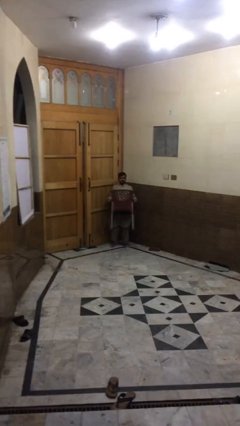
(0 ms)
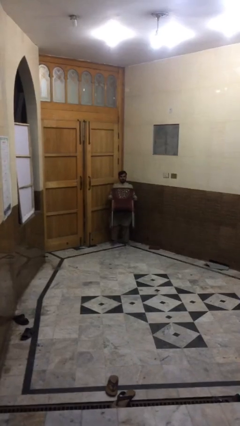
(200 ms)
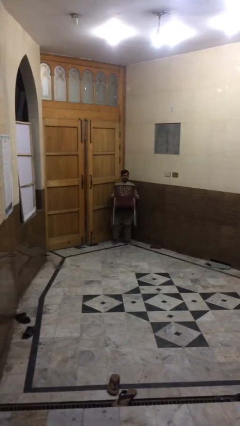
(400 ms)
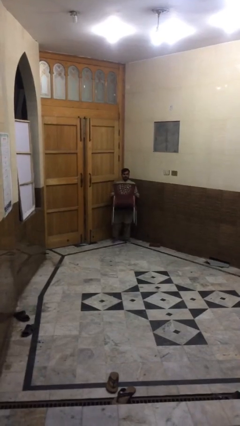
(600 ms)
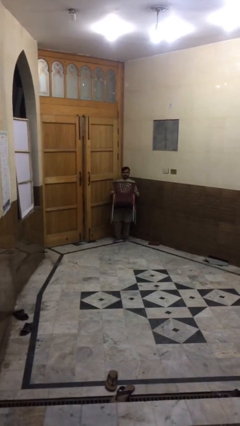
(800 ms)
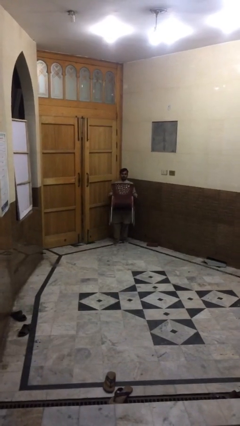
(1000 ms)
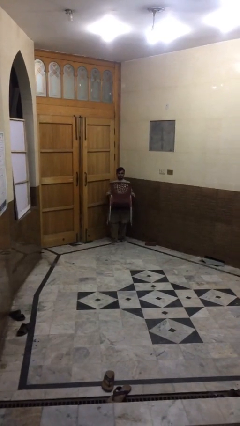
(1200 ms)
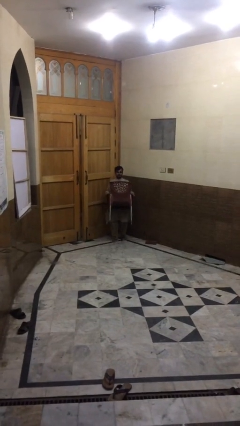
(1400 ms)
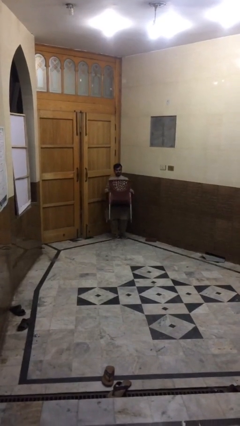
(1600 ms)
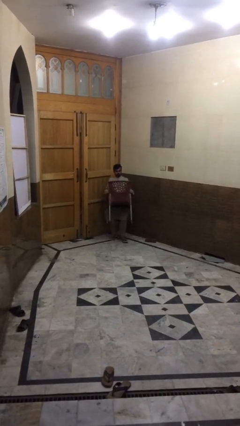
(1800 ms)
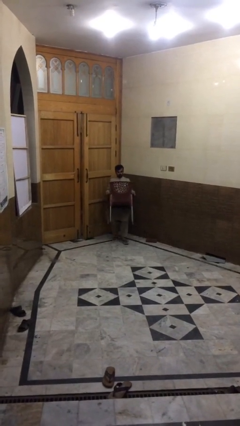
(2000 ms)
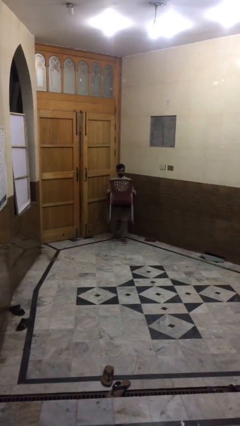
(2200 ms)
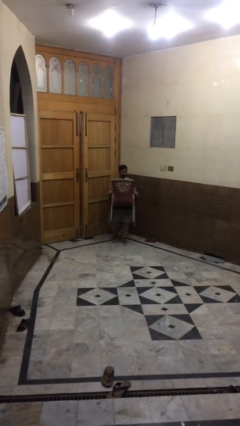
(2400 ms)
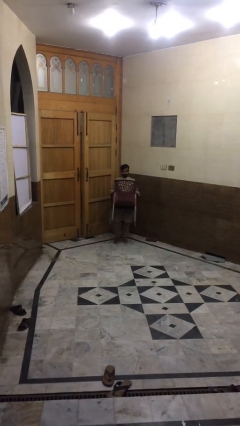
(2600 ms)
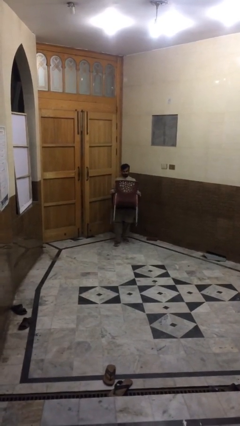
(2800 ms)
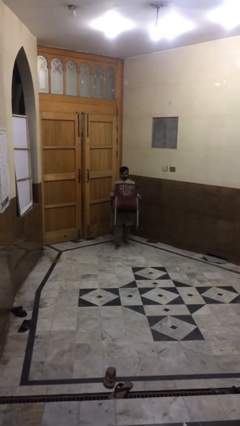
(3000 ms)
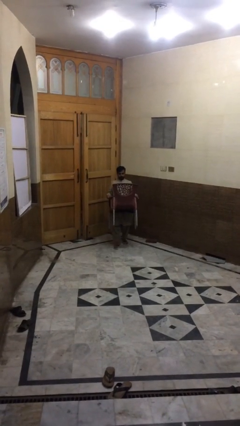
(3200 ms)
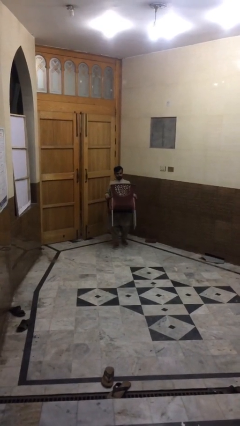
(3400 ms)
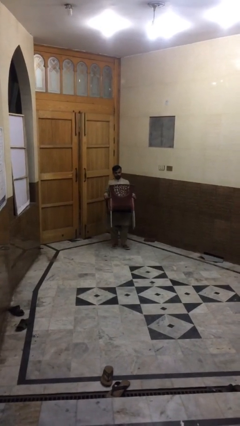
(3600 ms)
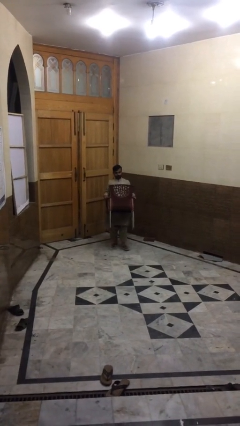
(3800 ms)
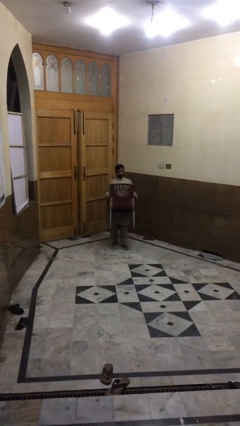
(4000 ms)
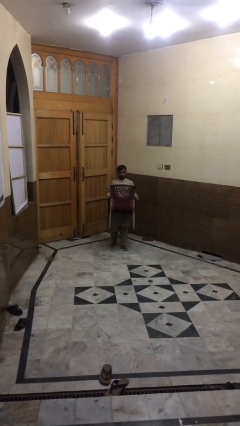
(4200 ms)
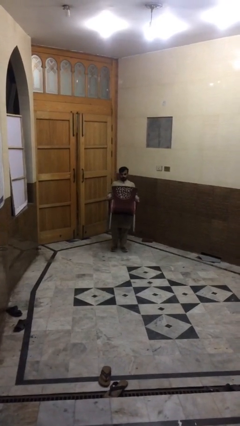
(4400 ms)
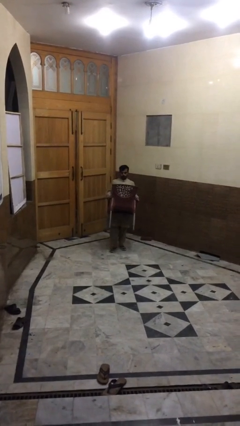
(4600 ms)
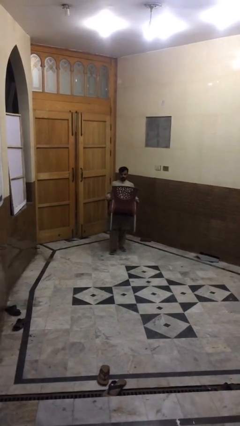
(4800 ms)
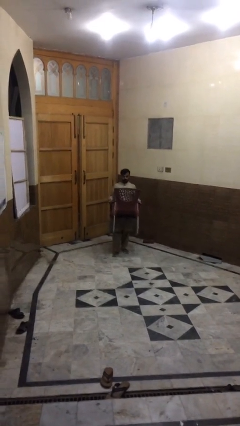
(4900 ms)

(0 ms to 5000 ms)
person carries heavy object

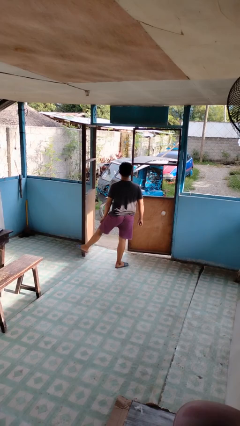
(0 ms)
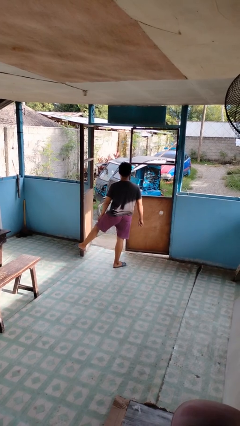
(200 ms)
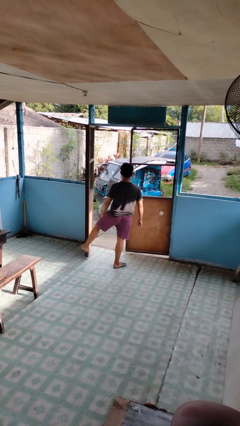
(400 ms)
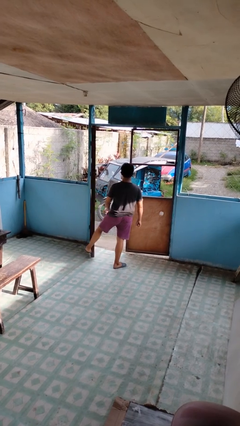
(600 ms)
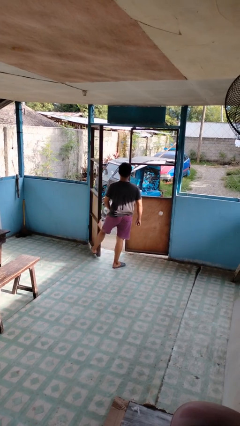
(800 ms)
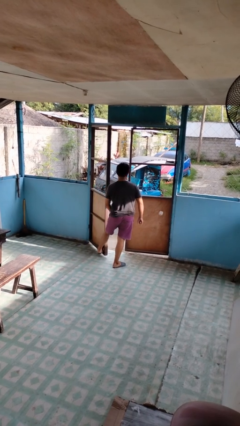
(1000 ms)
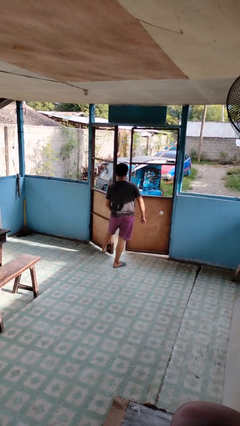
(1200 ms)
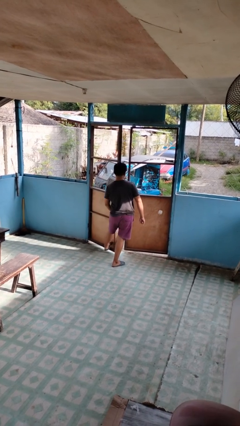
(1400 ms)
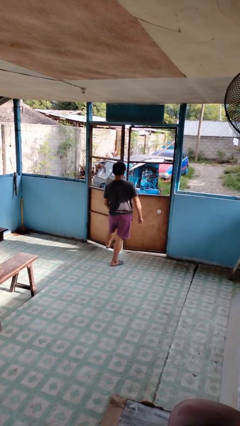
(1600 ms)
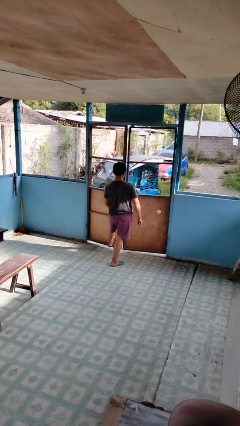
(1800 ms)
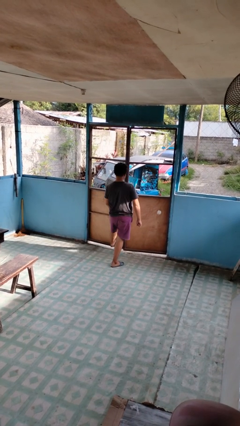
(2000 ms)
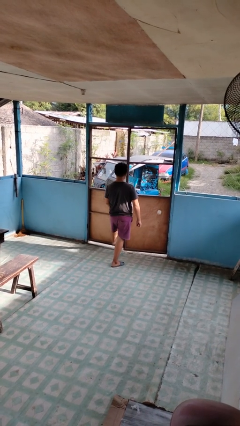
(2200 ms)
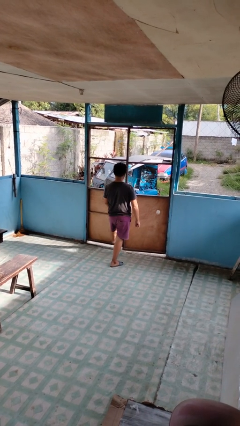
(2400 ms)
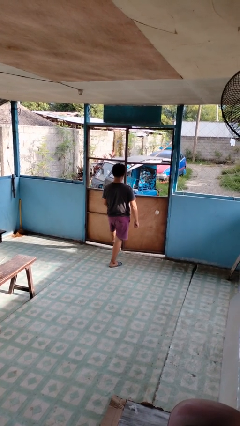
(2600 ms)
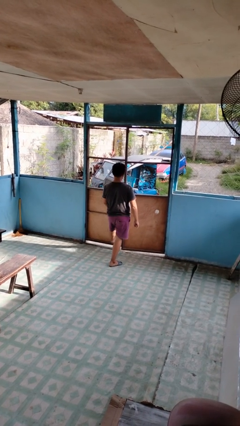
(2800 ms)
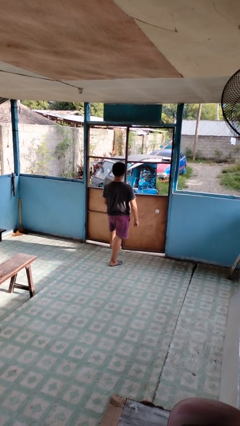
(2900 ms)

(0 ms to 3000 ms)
person closes door with foot

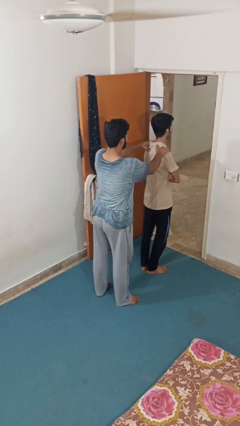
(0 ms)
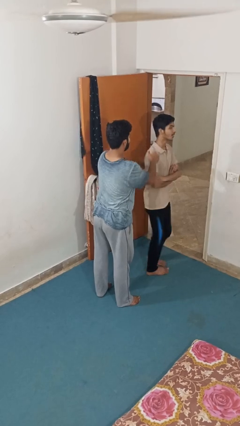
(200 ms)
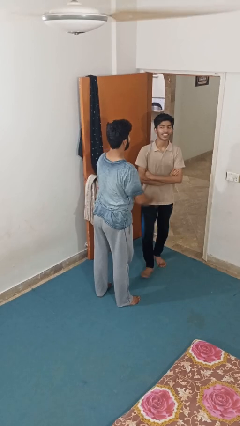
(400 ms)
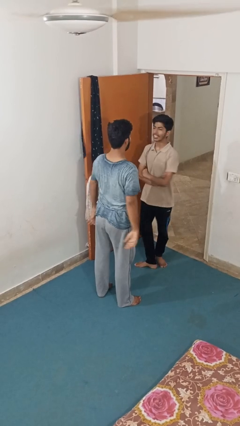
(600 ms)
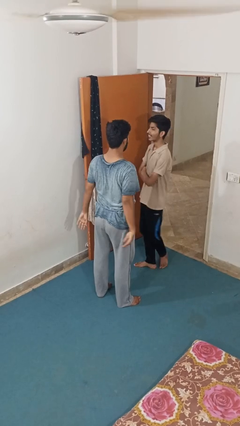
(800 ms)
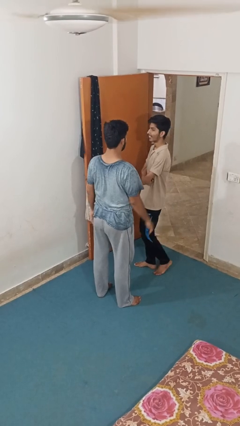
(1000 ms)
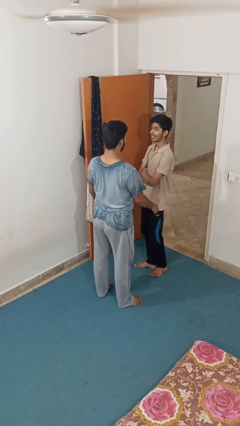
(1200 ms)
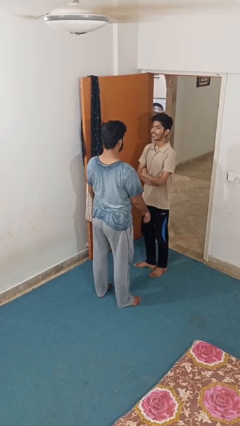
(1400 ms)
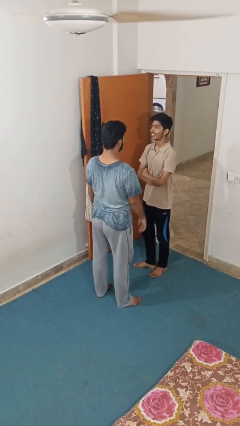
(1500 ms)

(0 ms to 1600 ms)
person spins person around

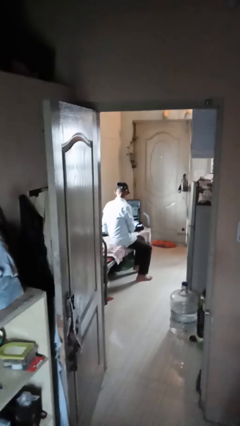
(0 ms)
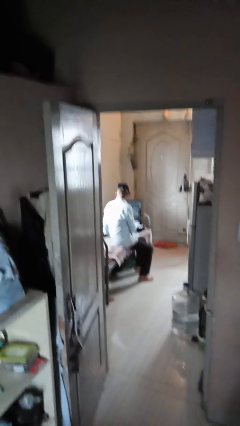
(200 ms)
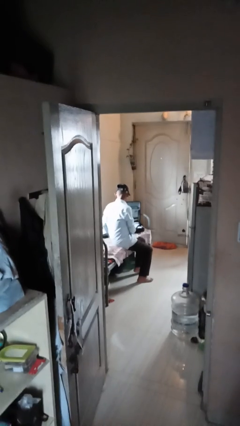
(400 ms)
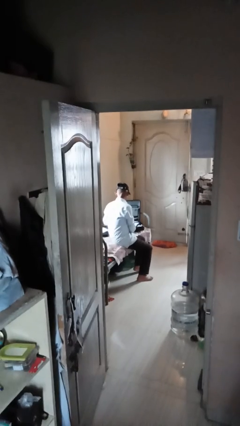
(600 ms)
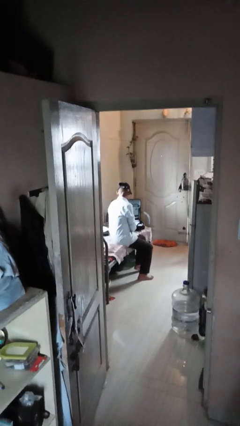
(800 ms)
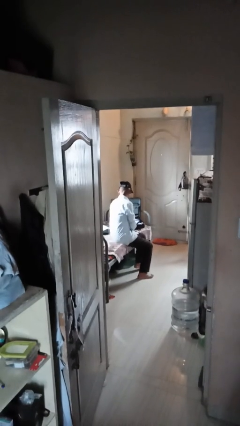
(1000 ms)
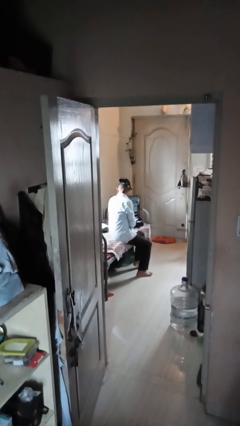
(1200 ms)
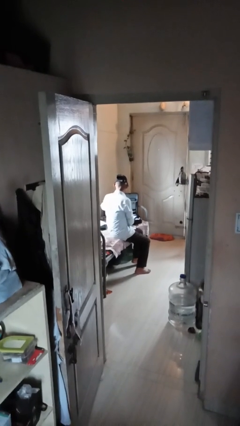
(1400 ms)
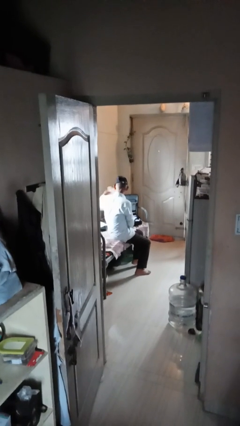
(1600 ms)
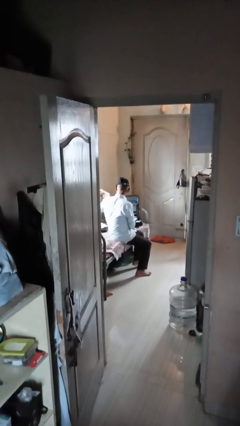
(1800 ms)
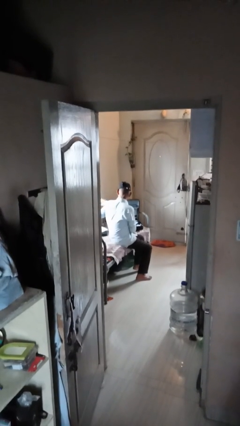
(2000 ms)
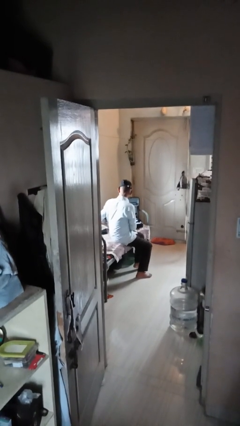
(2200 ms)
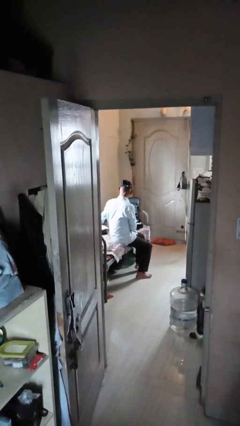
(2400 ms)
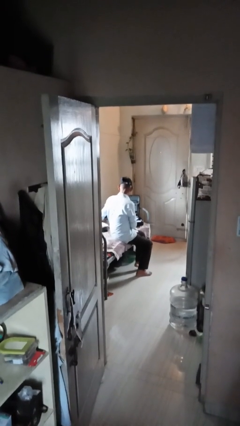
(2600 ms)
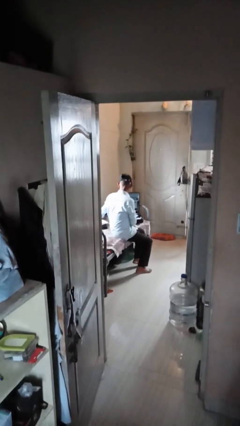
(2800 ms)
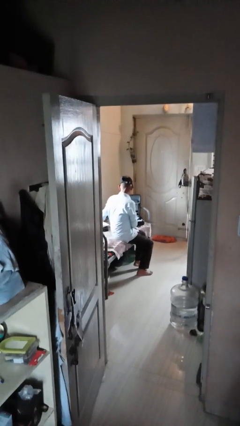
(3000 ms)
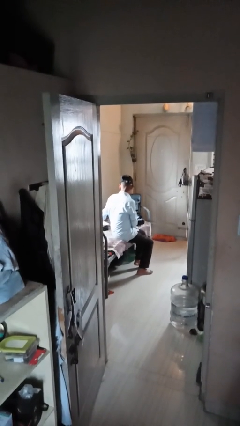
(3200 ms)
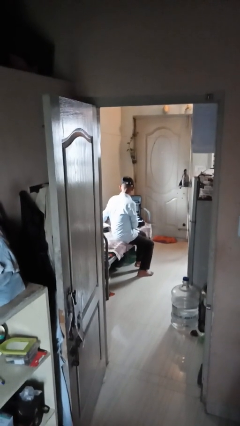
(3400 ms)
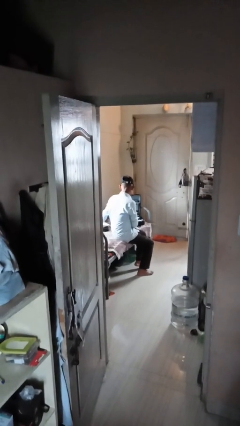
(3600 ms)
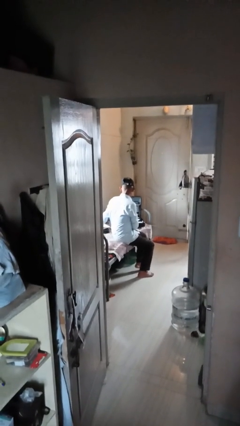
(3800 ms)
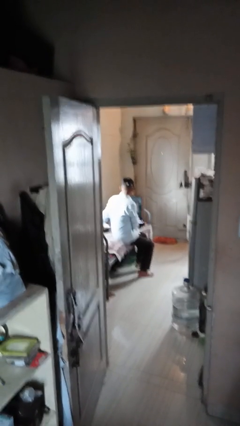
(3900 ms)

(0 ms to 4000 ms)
person unloads clothes from suitcase

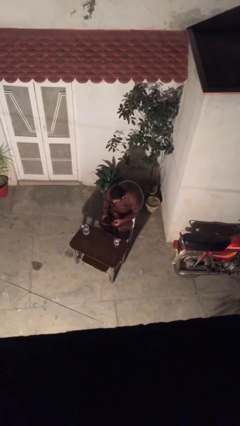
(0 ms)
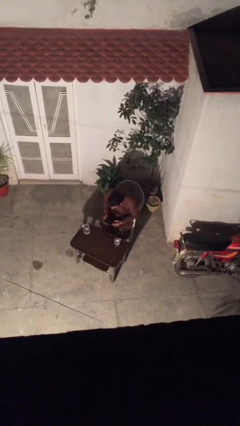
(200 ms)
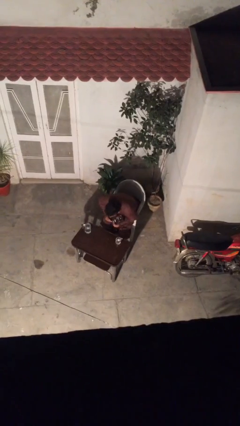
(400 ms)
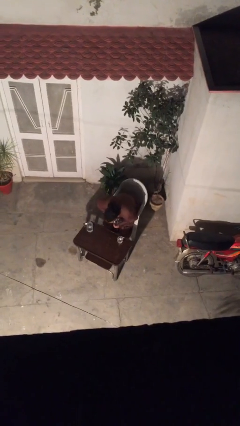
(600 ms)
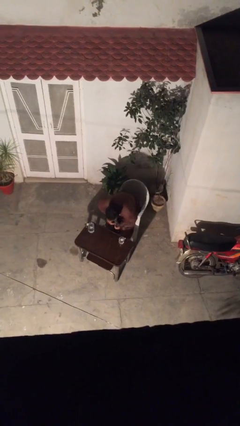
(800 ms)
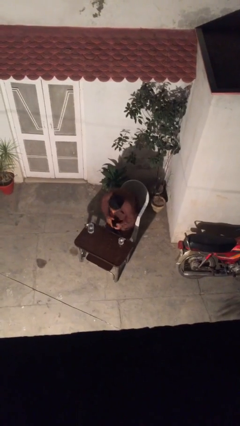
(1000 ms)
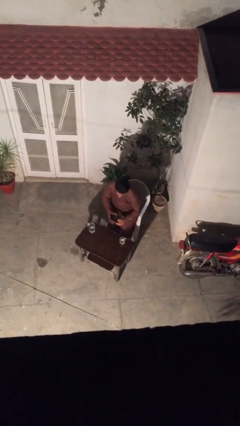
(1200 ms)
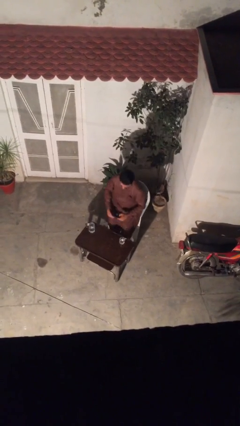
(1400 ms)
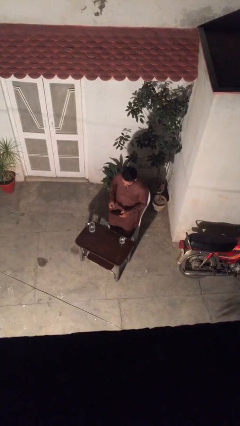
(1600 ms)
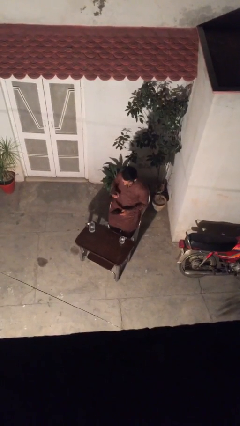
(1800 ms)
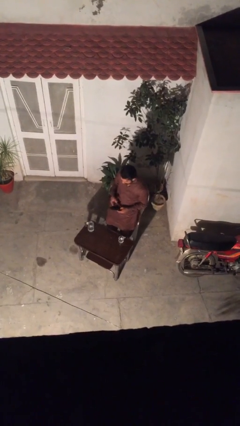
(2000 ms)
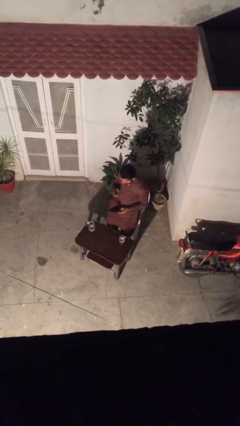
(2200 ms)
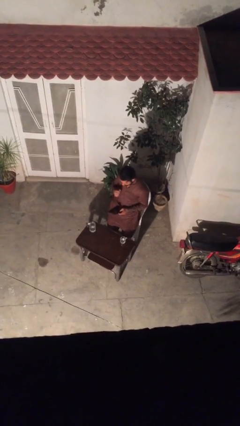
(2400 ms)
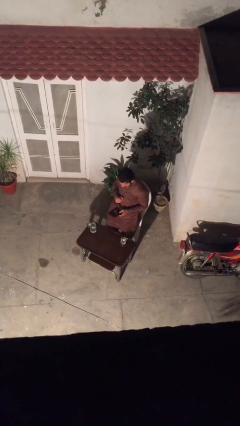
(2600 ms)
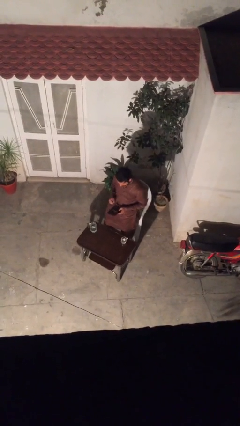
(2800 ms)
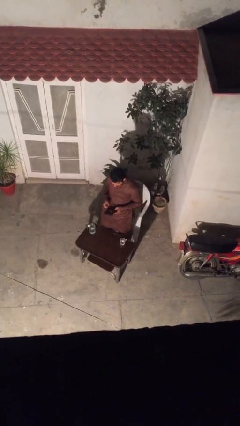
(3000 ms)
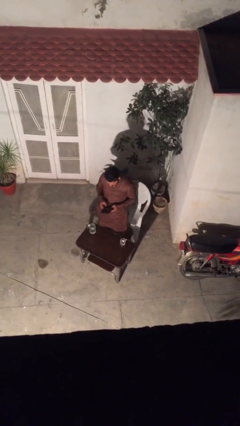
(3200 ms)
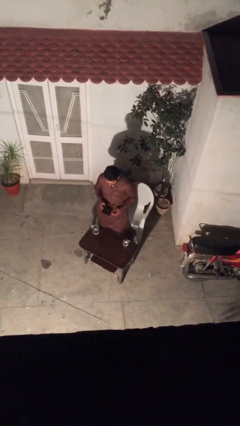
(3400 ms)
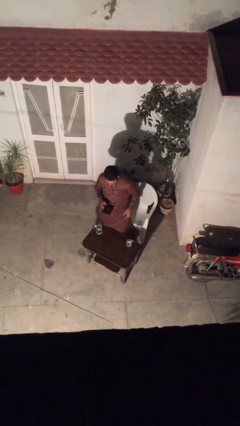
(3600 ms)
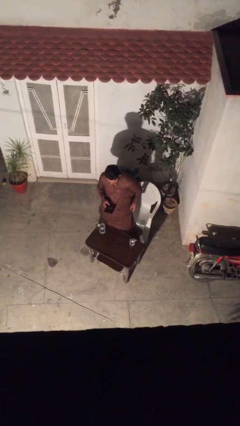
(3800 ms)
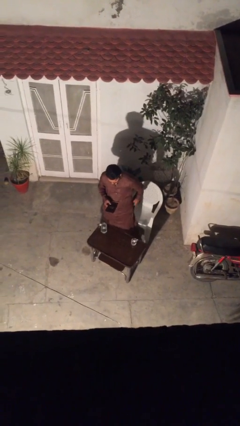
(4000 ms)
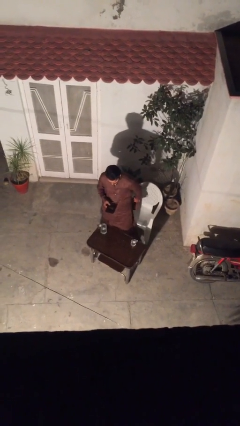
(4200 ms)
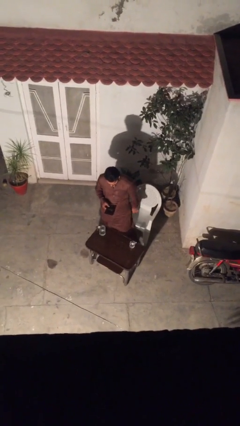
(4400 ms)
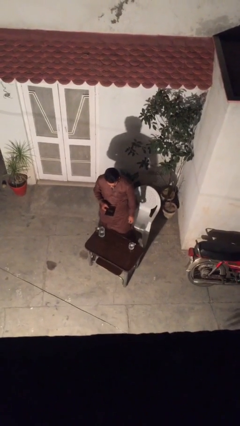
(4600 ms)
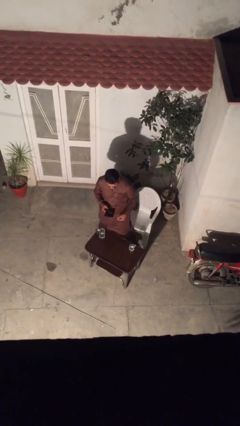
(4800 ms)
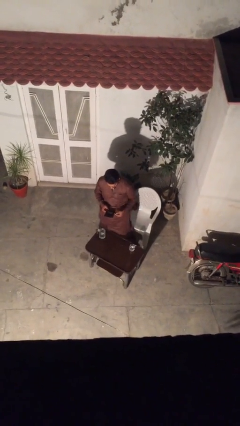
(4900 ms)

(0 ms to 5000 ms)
person stands up
